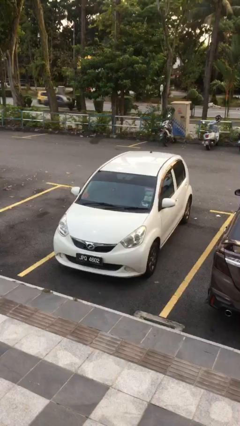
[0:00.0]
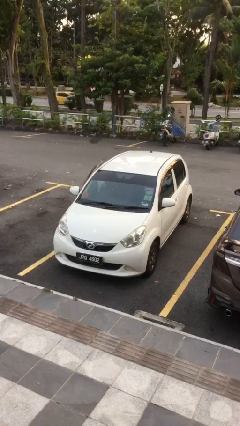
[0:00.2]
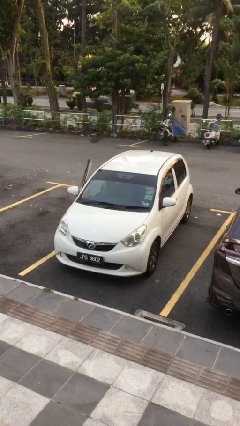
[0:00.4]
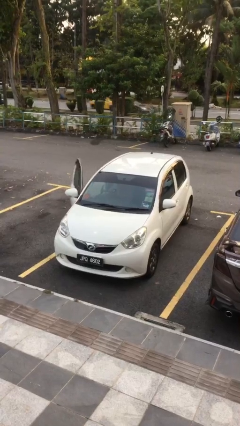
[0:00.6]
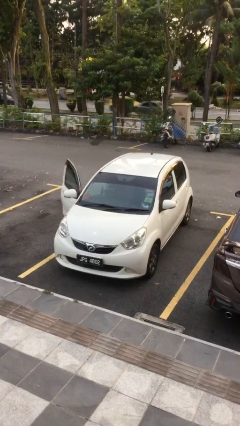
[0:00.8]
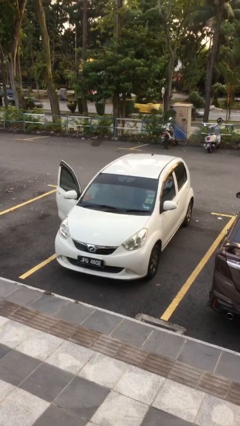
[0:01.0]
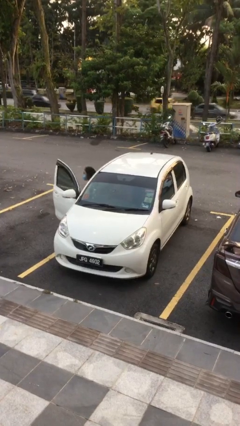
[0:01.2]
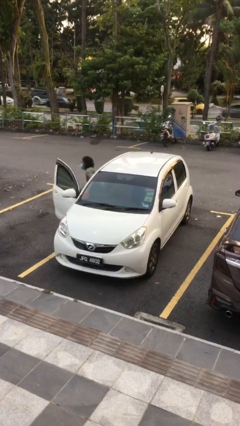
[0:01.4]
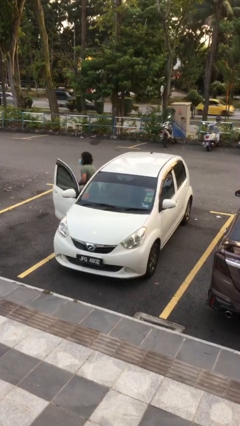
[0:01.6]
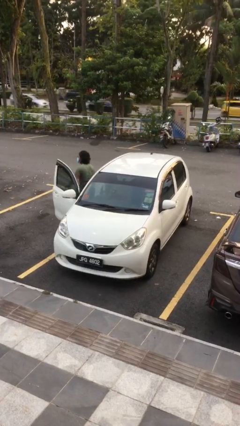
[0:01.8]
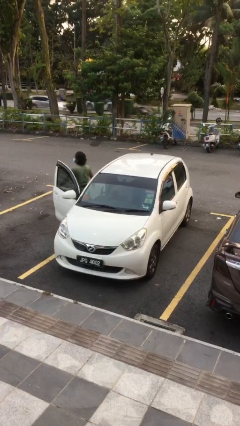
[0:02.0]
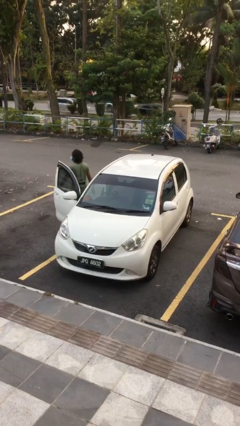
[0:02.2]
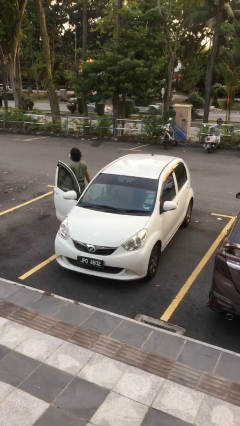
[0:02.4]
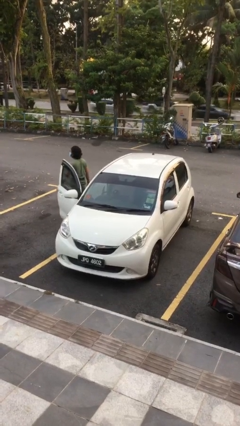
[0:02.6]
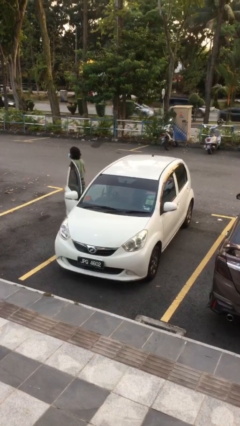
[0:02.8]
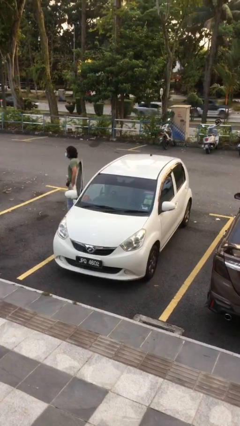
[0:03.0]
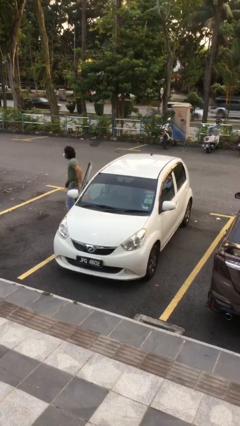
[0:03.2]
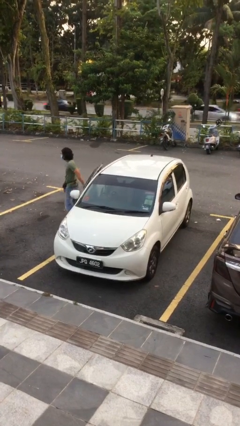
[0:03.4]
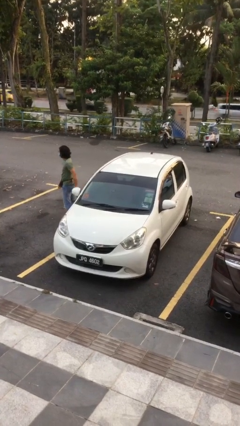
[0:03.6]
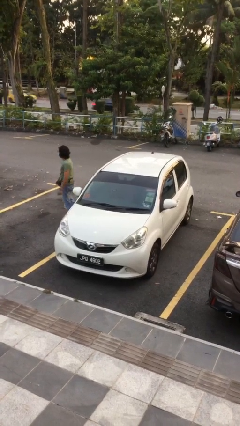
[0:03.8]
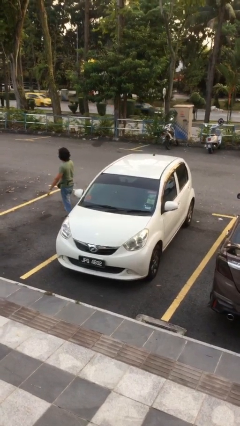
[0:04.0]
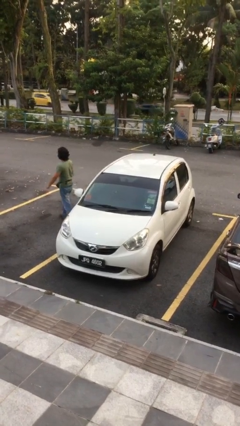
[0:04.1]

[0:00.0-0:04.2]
car drops off person

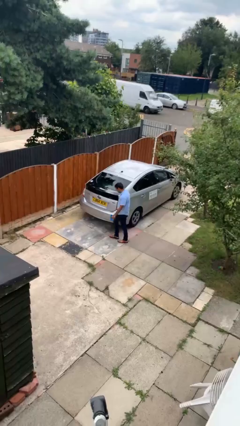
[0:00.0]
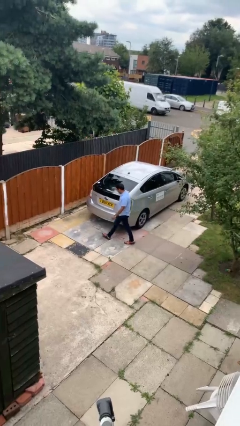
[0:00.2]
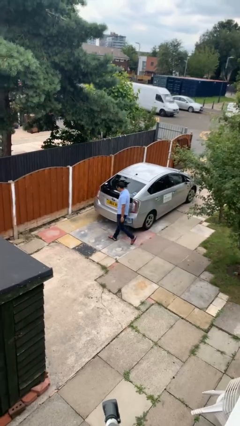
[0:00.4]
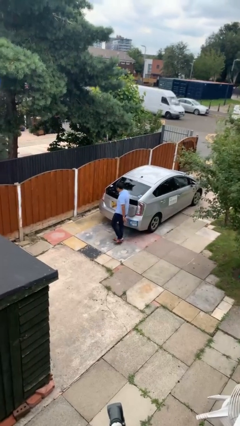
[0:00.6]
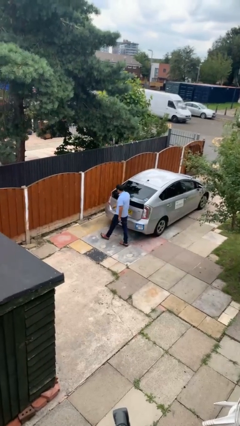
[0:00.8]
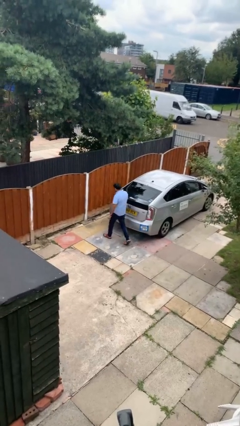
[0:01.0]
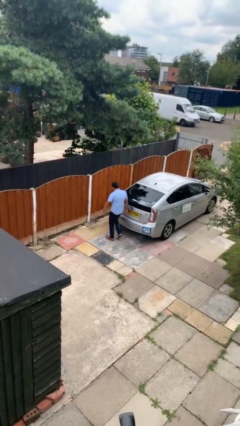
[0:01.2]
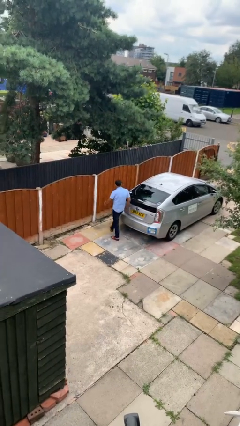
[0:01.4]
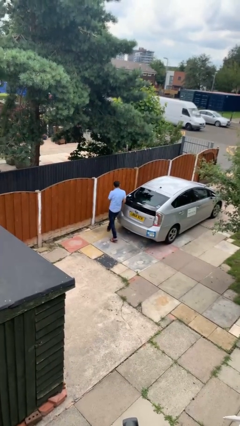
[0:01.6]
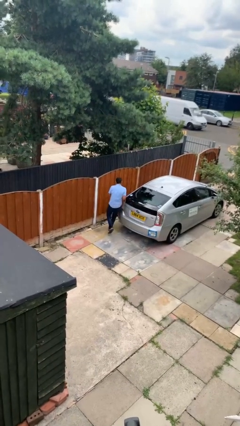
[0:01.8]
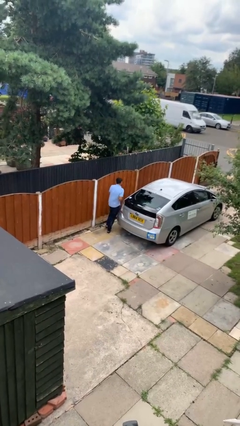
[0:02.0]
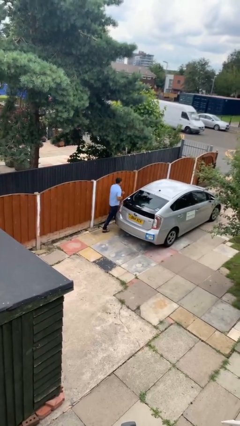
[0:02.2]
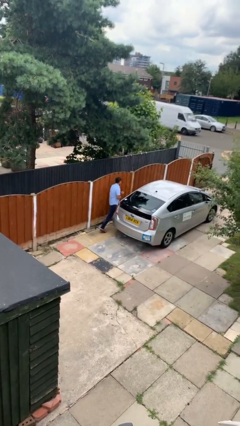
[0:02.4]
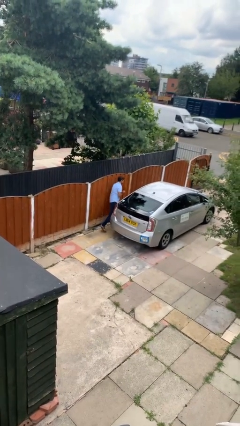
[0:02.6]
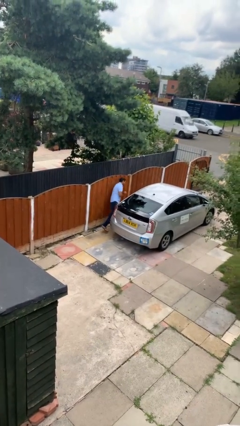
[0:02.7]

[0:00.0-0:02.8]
person walks around car

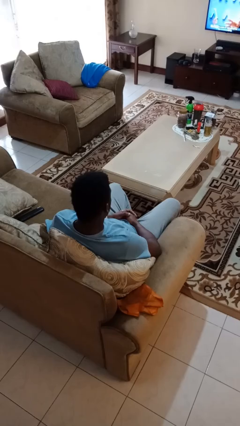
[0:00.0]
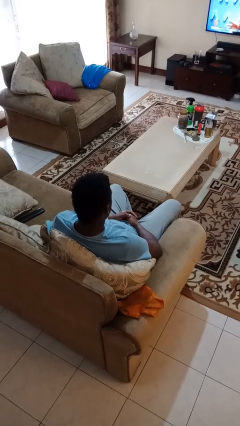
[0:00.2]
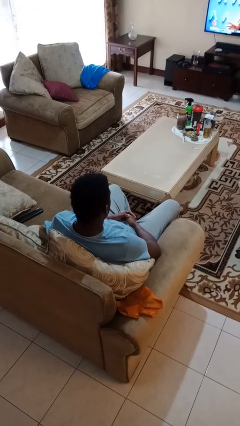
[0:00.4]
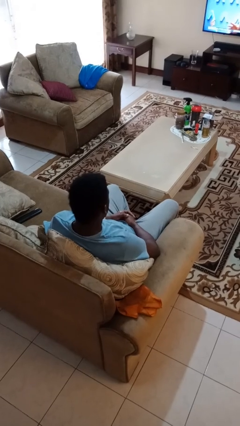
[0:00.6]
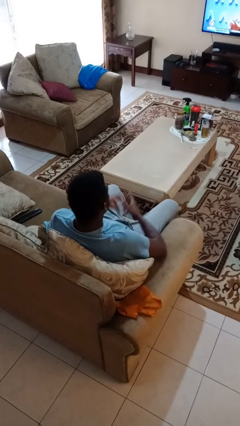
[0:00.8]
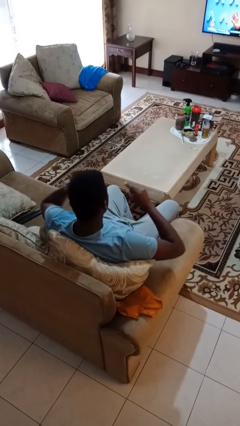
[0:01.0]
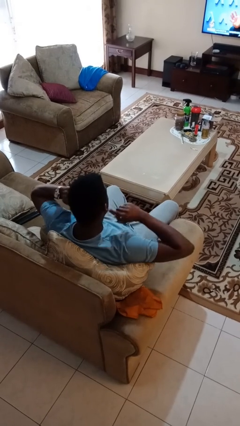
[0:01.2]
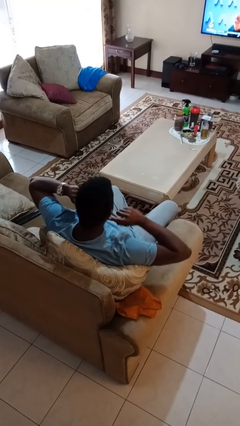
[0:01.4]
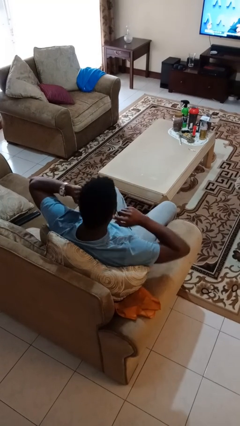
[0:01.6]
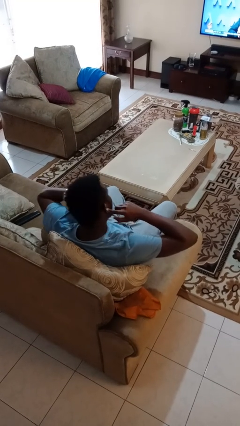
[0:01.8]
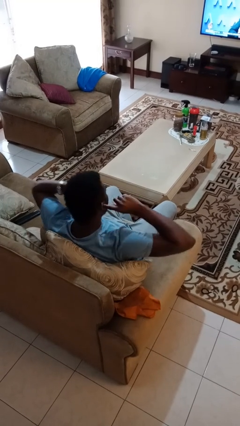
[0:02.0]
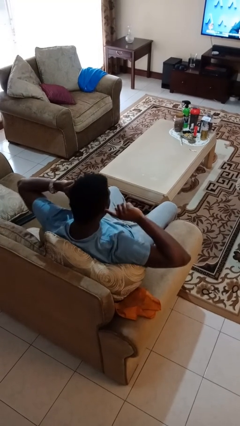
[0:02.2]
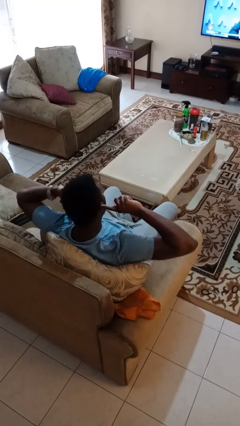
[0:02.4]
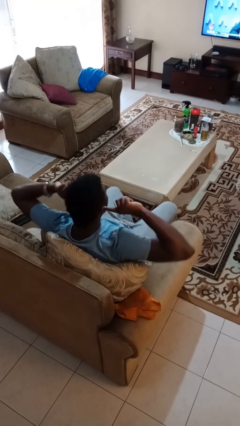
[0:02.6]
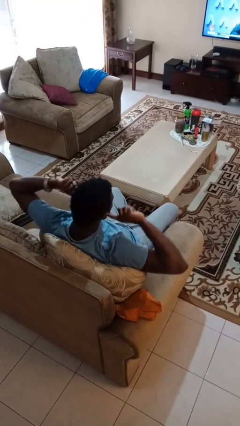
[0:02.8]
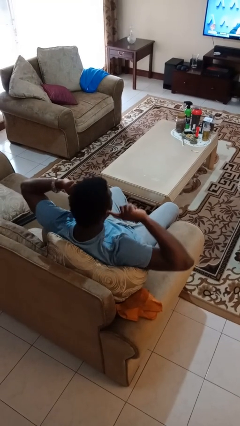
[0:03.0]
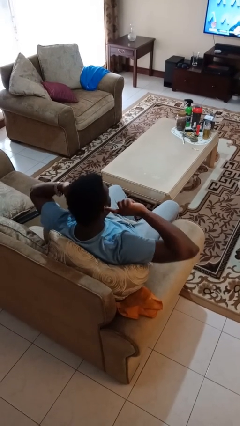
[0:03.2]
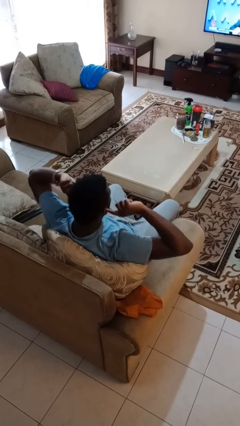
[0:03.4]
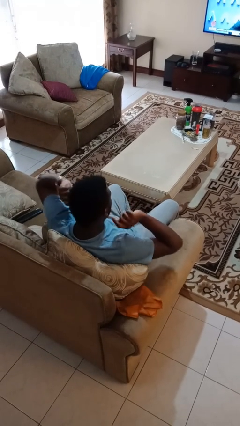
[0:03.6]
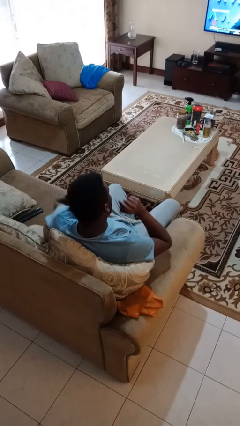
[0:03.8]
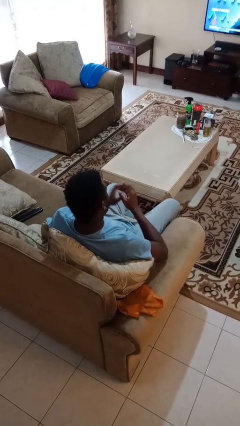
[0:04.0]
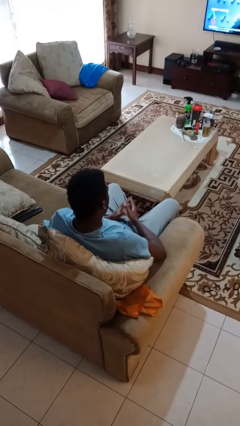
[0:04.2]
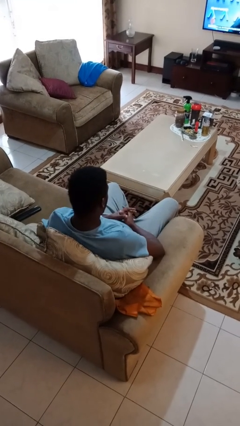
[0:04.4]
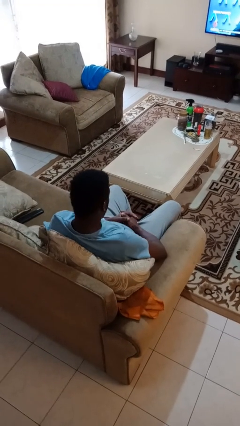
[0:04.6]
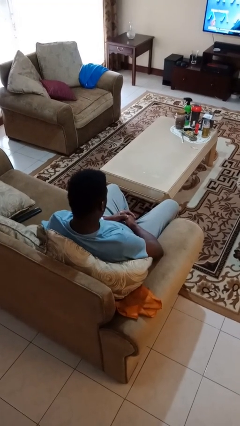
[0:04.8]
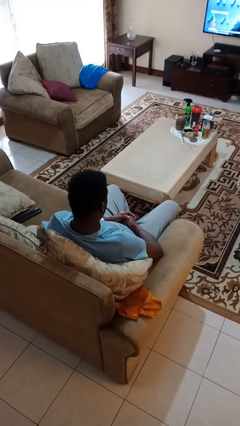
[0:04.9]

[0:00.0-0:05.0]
person puts fingers in ear

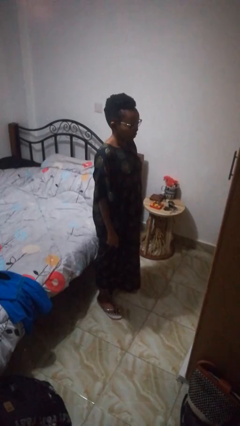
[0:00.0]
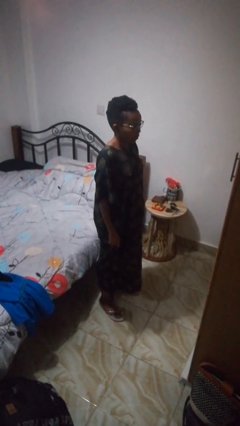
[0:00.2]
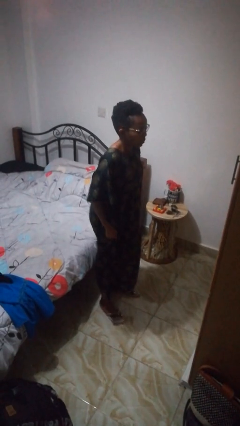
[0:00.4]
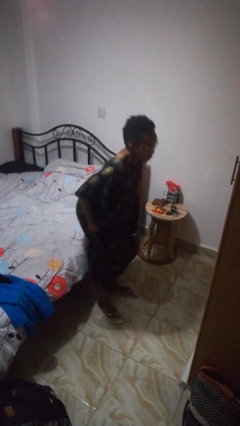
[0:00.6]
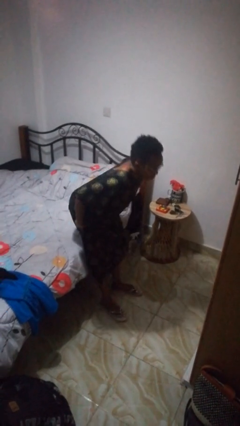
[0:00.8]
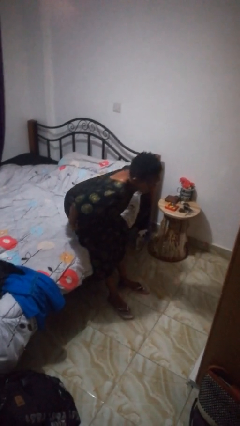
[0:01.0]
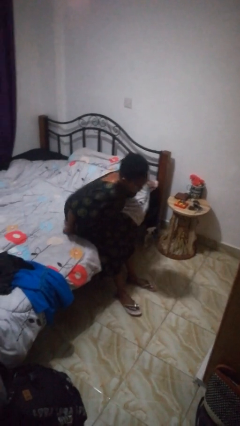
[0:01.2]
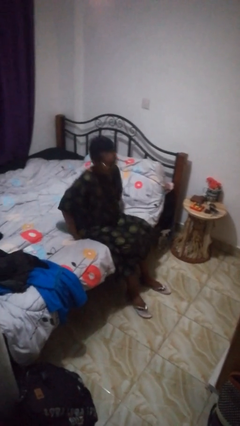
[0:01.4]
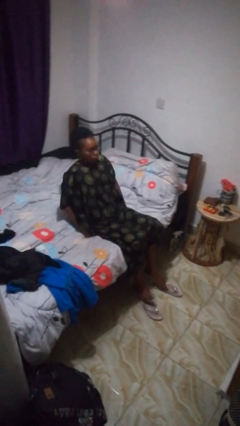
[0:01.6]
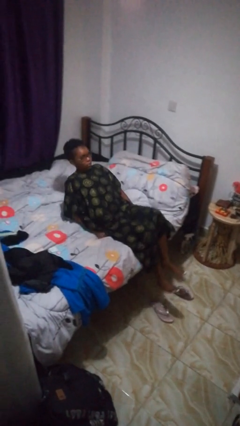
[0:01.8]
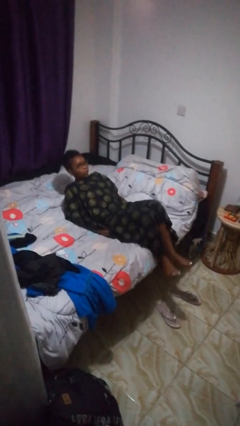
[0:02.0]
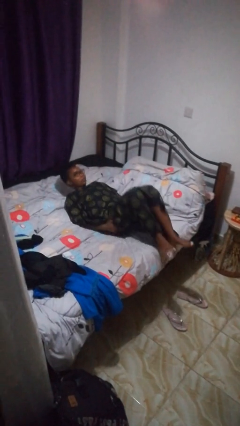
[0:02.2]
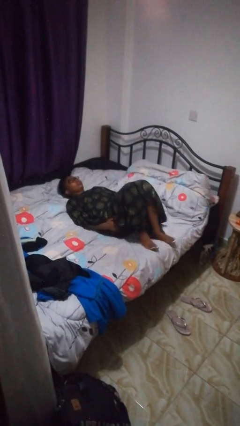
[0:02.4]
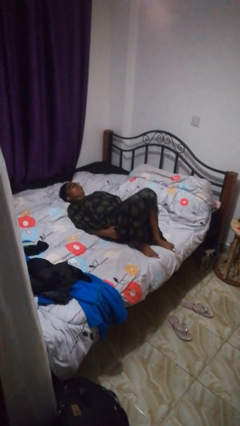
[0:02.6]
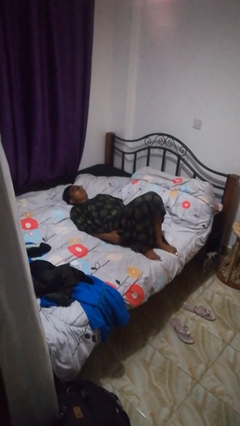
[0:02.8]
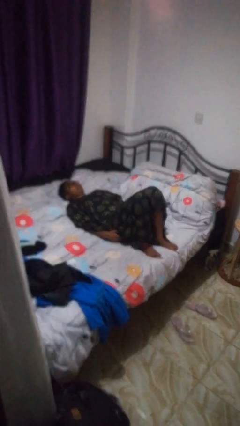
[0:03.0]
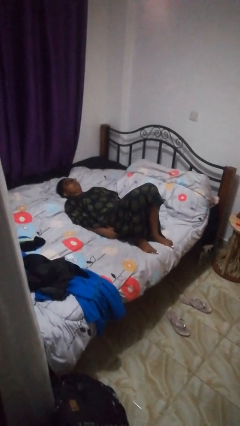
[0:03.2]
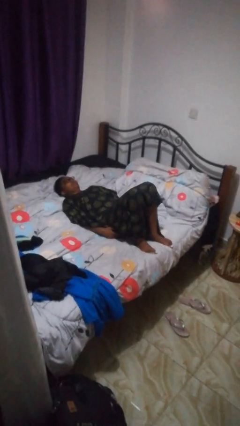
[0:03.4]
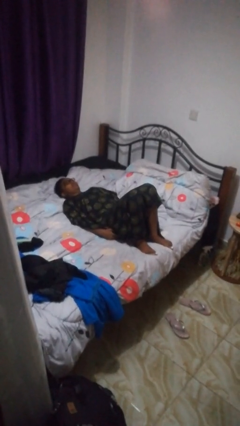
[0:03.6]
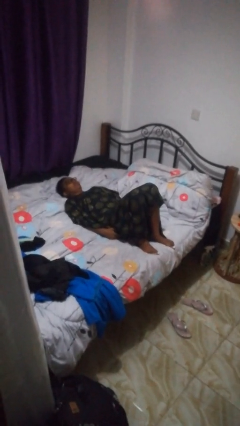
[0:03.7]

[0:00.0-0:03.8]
person lies down on bed

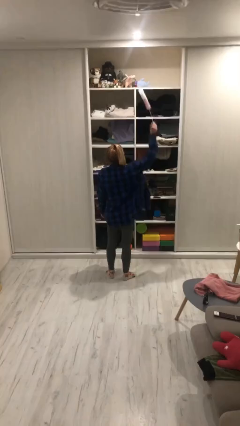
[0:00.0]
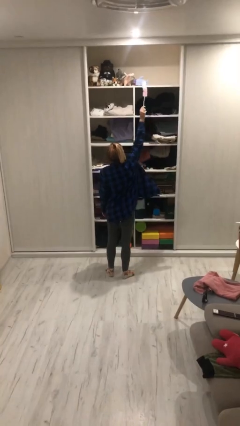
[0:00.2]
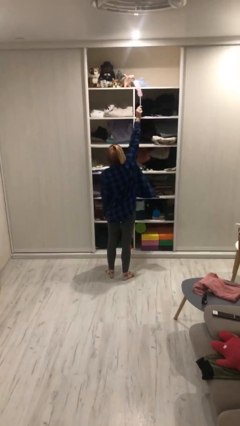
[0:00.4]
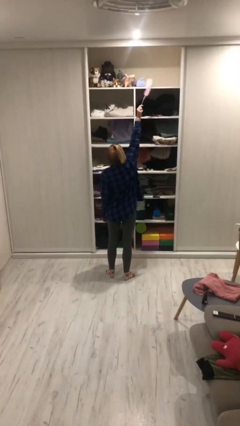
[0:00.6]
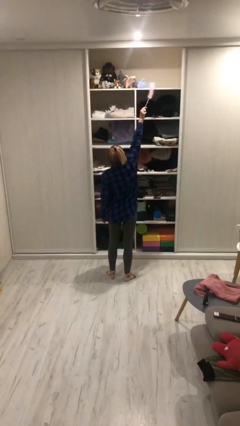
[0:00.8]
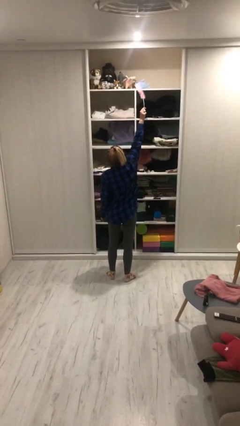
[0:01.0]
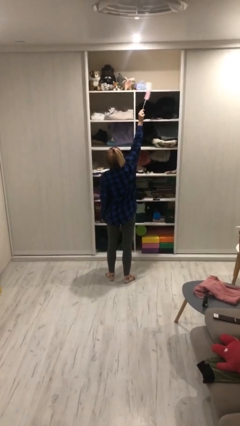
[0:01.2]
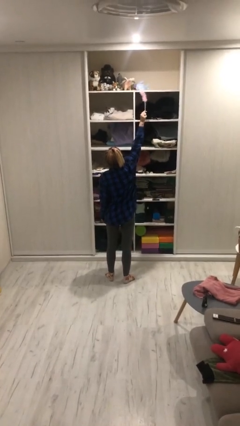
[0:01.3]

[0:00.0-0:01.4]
person dusts furniture

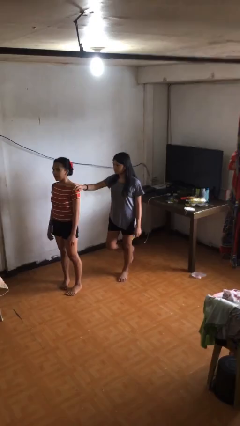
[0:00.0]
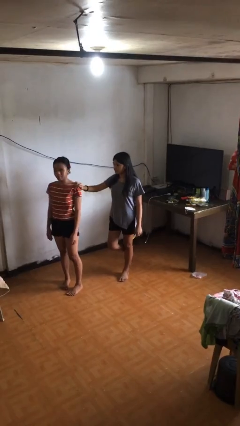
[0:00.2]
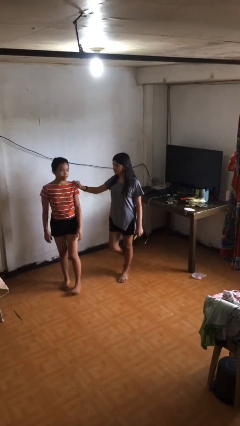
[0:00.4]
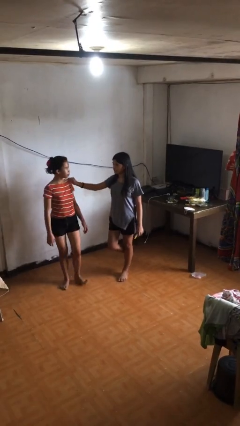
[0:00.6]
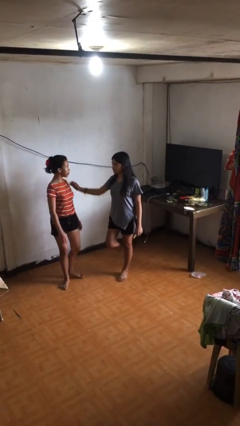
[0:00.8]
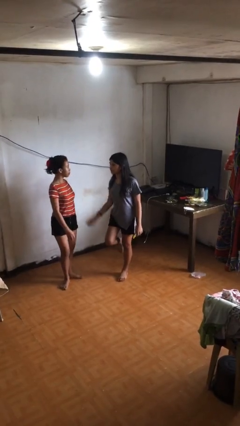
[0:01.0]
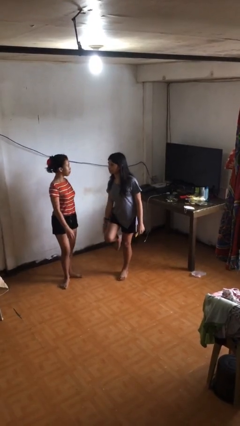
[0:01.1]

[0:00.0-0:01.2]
person spins person around
